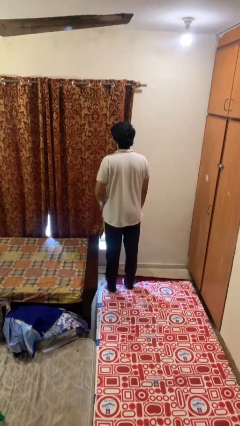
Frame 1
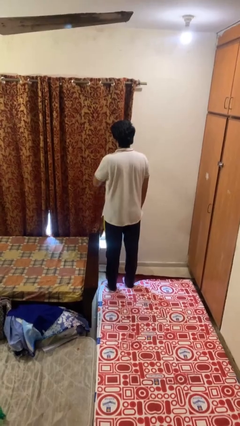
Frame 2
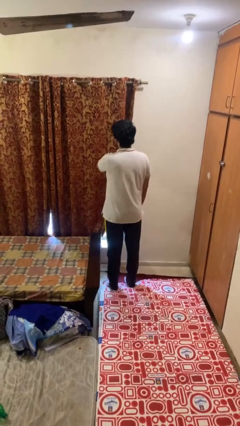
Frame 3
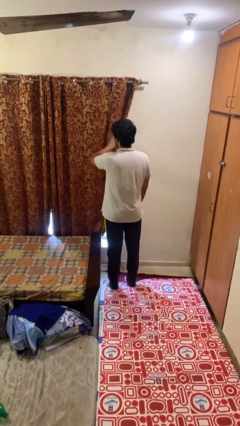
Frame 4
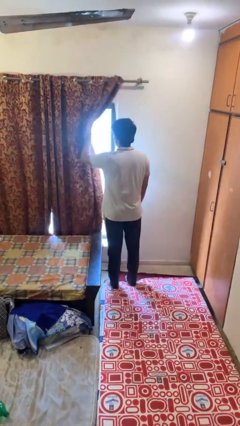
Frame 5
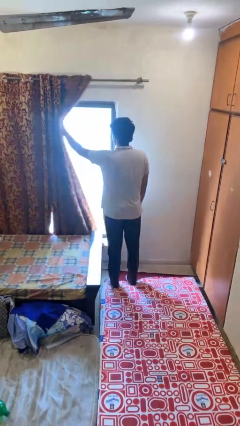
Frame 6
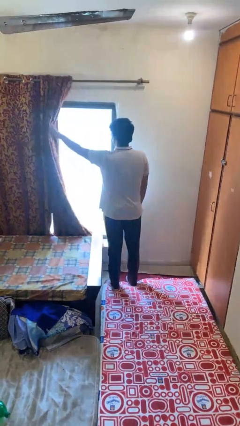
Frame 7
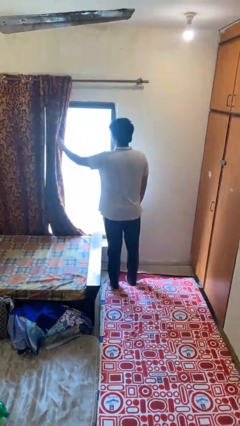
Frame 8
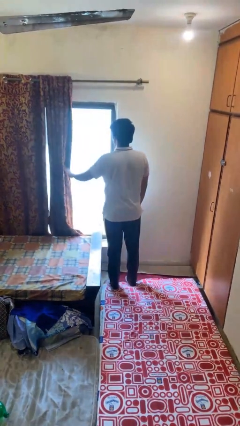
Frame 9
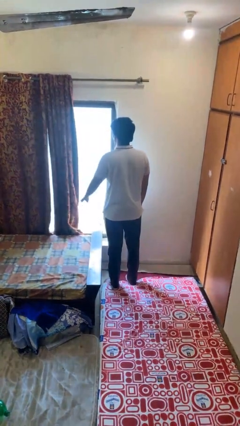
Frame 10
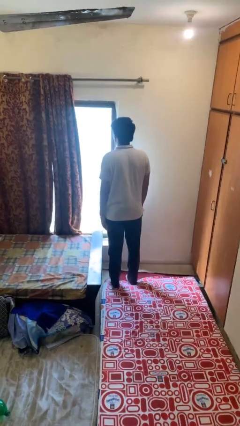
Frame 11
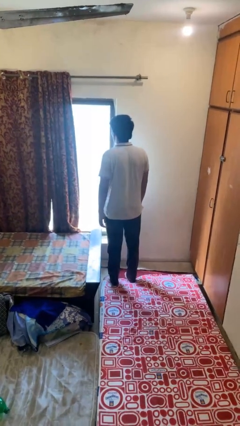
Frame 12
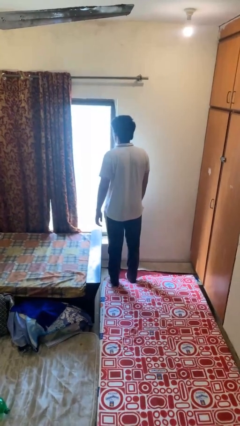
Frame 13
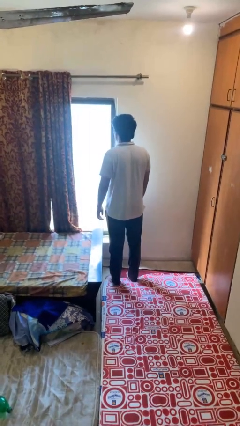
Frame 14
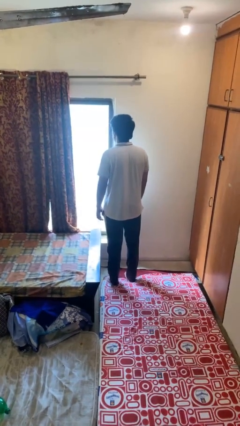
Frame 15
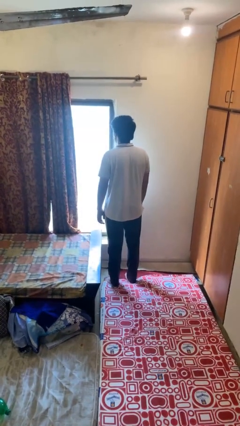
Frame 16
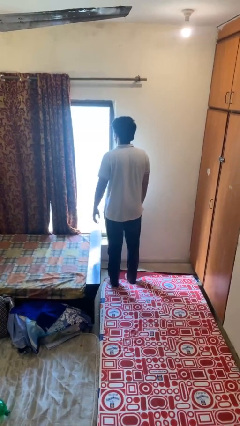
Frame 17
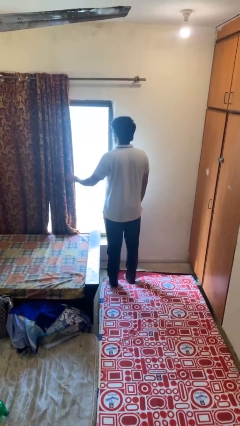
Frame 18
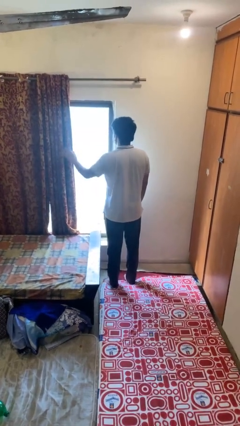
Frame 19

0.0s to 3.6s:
person opens curtains

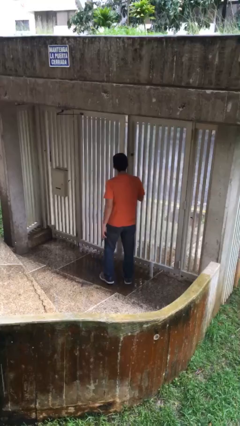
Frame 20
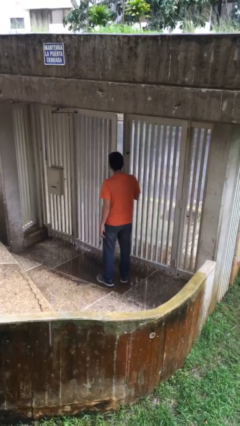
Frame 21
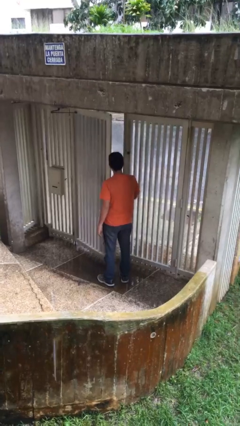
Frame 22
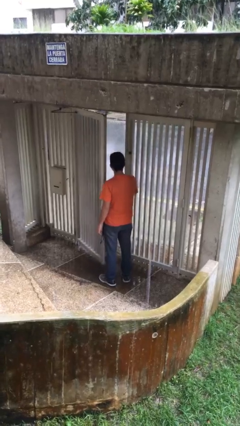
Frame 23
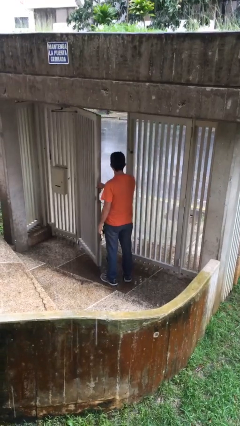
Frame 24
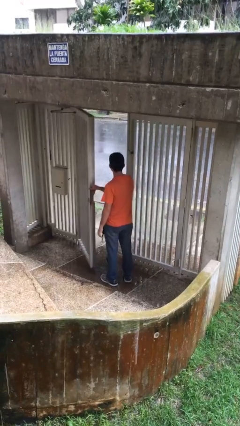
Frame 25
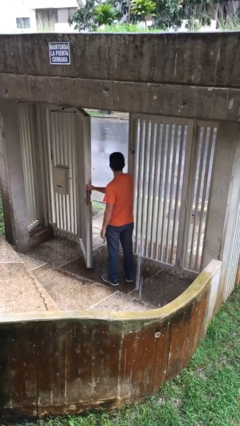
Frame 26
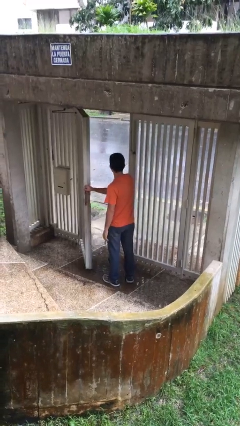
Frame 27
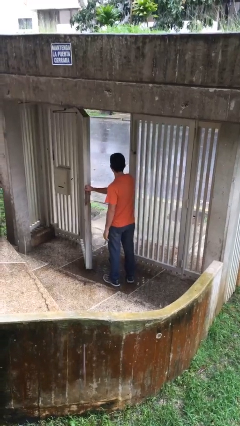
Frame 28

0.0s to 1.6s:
person opens facility door

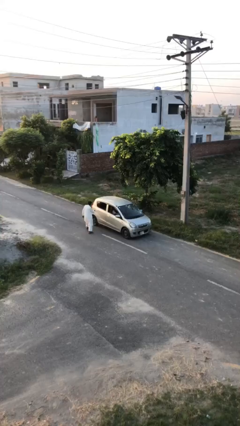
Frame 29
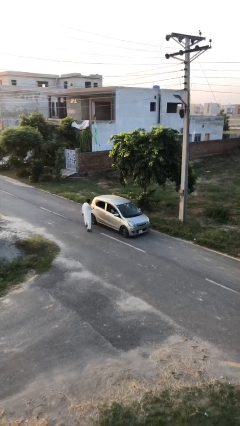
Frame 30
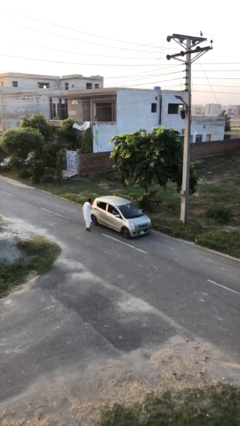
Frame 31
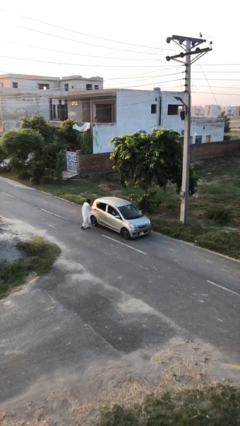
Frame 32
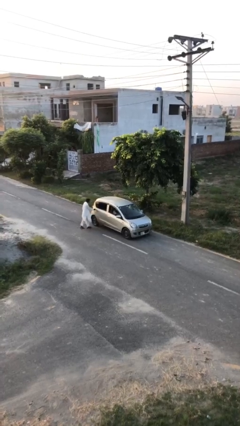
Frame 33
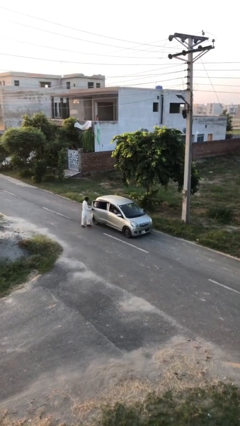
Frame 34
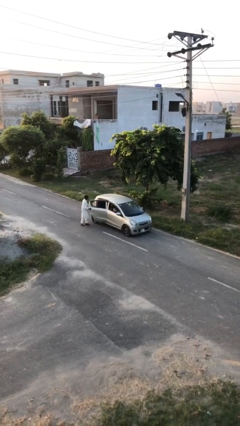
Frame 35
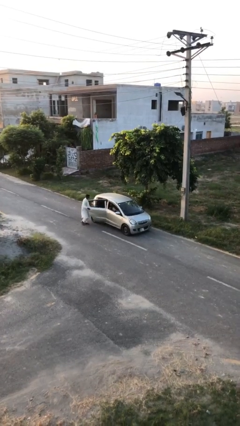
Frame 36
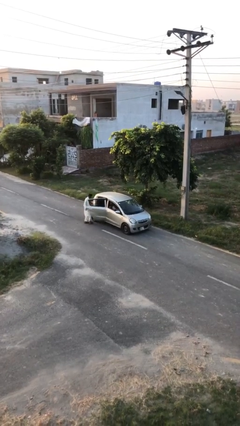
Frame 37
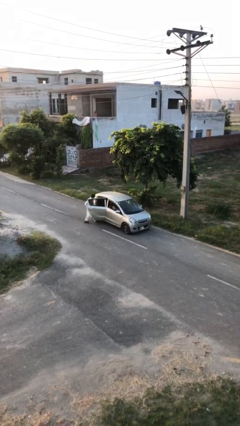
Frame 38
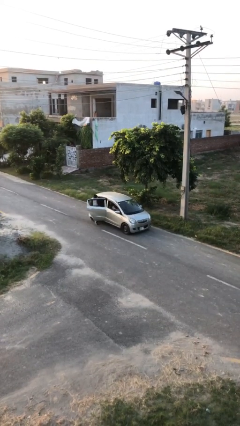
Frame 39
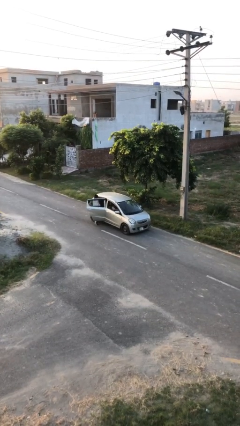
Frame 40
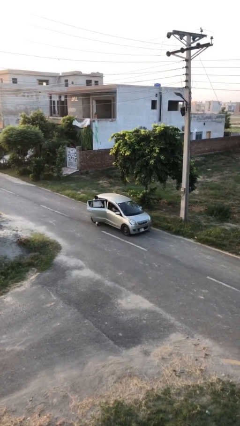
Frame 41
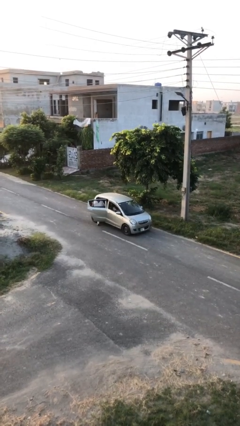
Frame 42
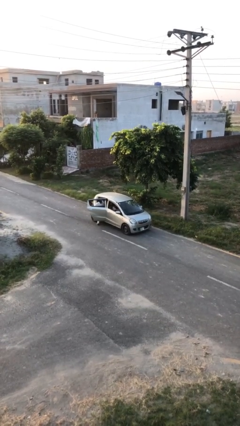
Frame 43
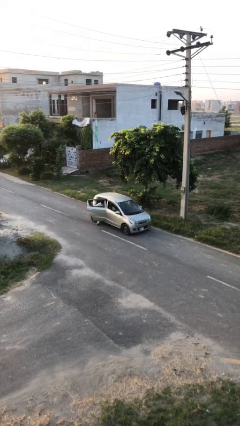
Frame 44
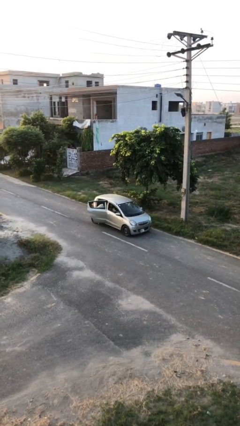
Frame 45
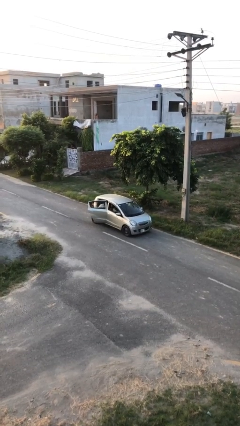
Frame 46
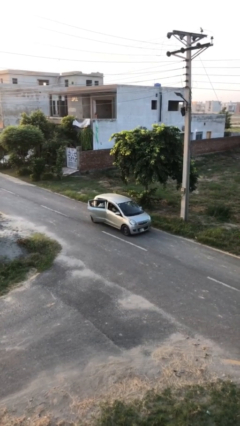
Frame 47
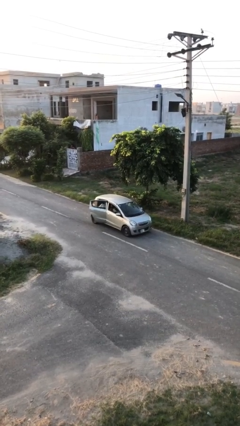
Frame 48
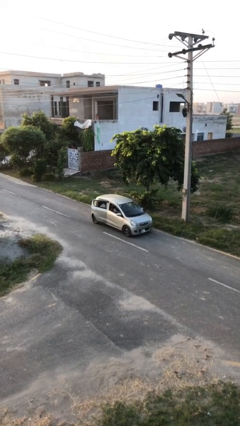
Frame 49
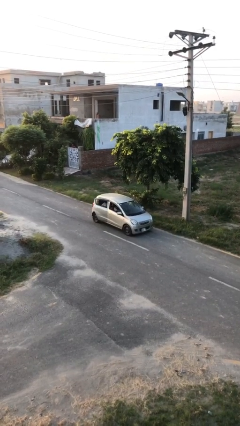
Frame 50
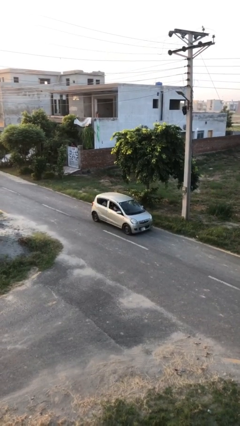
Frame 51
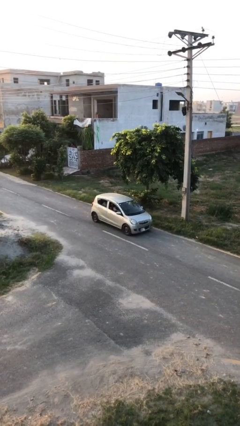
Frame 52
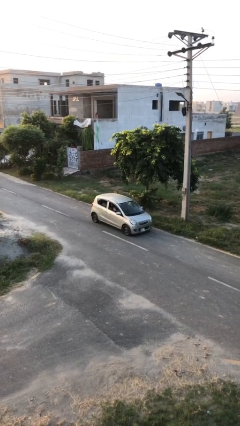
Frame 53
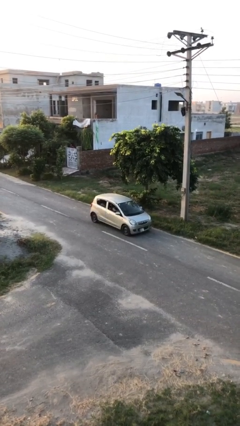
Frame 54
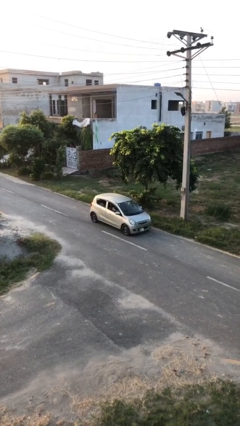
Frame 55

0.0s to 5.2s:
car picks up person

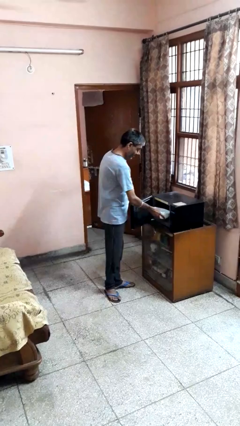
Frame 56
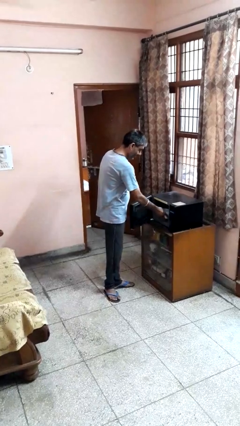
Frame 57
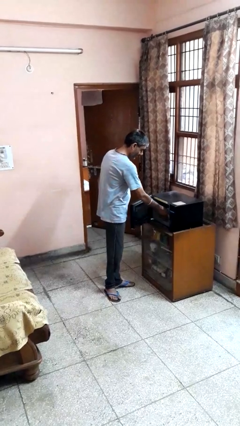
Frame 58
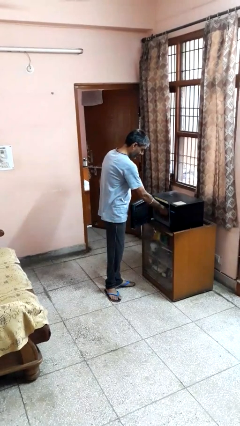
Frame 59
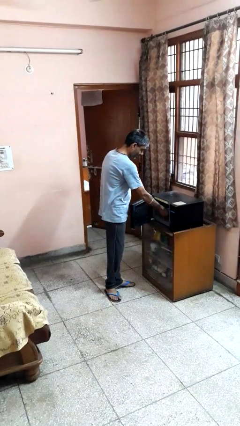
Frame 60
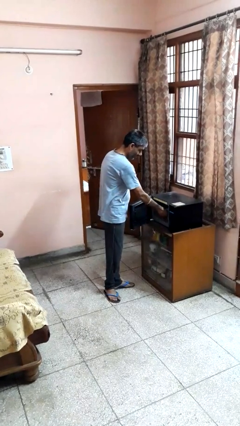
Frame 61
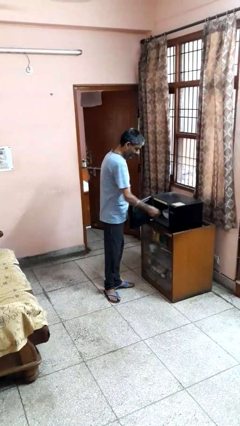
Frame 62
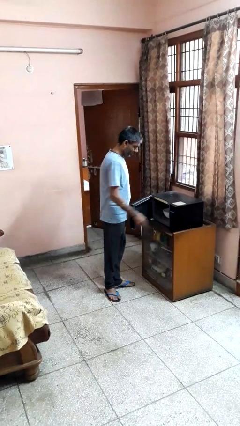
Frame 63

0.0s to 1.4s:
person puts object into microwave

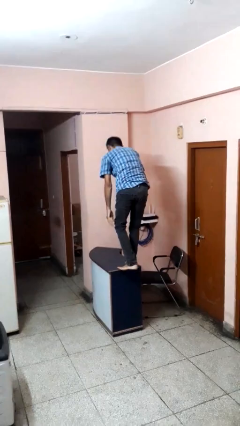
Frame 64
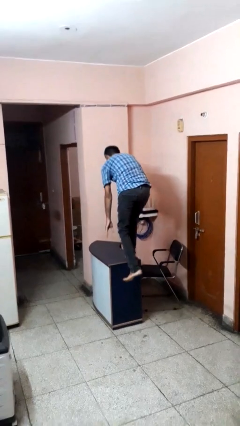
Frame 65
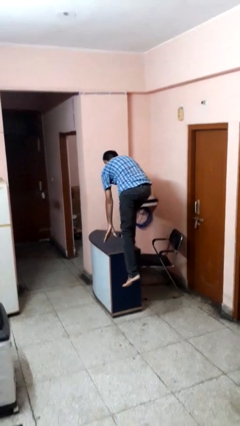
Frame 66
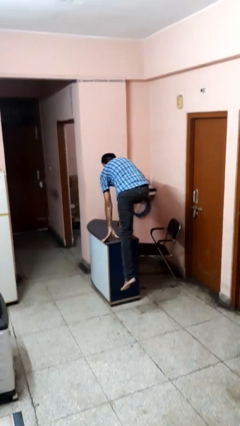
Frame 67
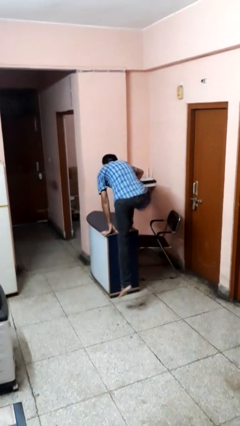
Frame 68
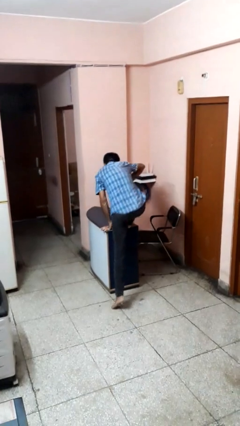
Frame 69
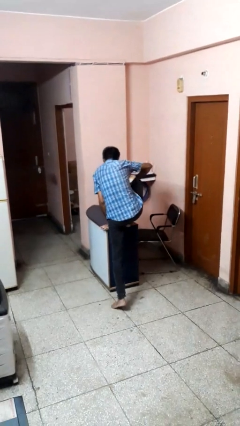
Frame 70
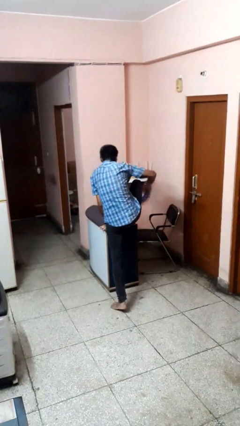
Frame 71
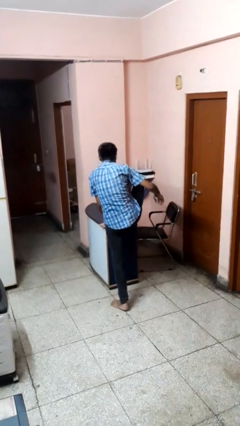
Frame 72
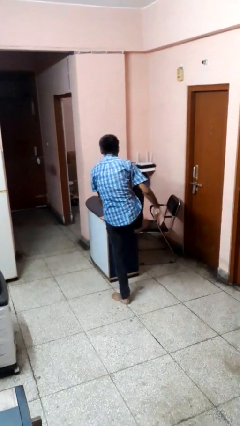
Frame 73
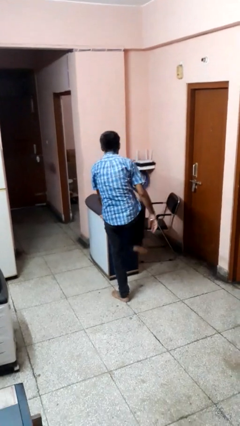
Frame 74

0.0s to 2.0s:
person climbs off table

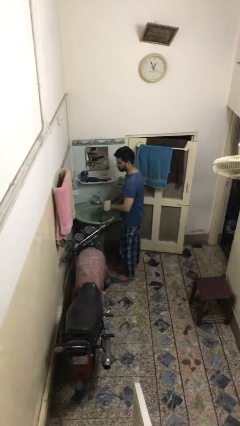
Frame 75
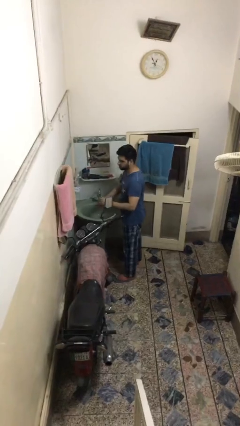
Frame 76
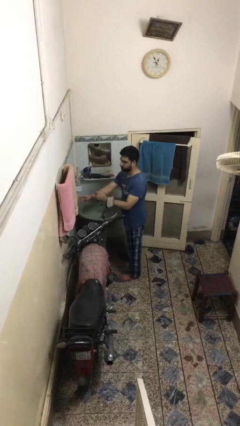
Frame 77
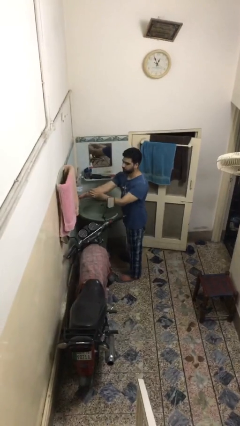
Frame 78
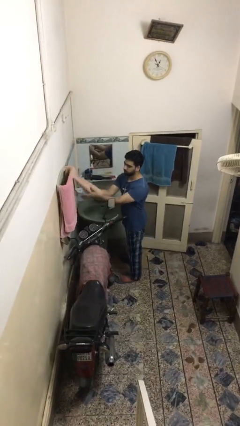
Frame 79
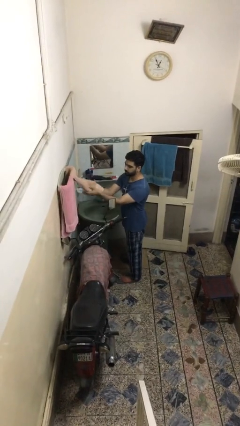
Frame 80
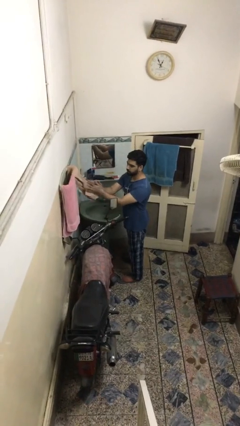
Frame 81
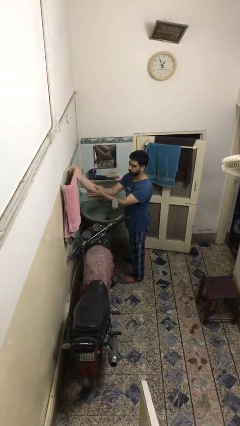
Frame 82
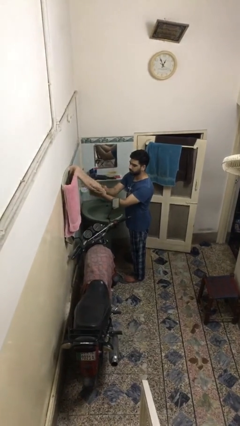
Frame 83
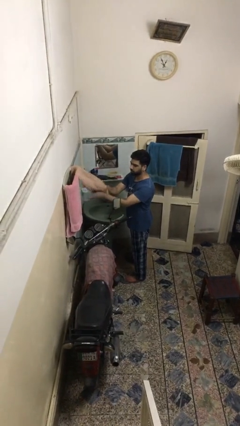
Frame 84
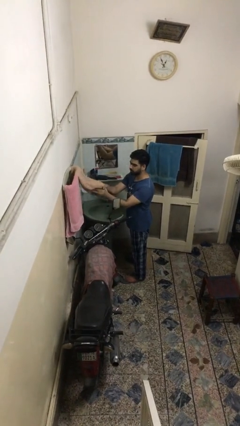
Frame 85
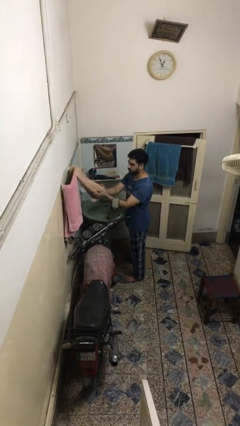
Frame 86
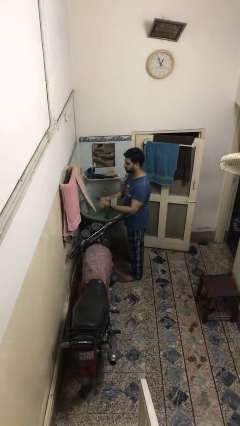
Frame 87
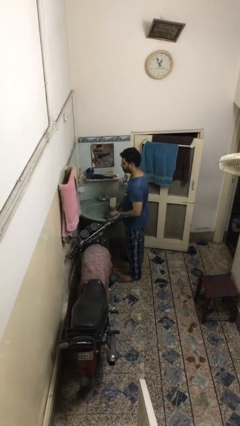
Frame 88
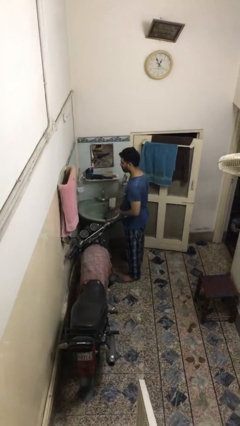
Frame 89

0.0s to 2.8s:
person dries hands with towel

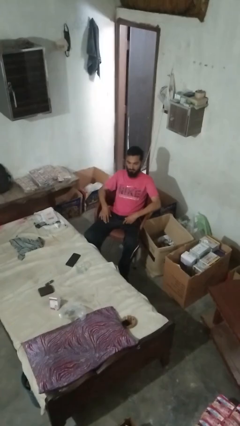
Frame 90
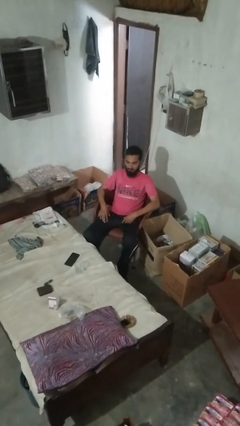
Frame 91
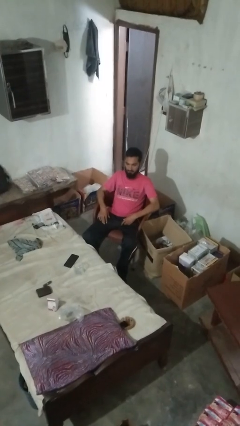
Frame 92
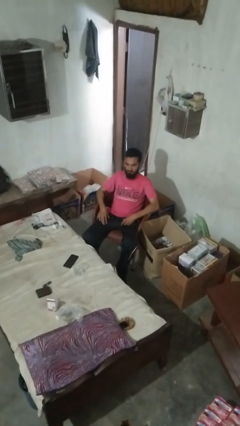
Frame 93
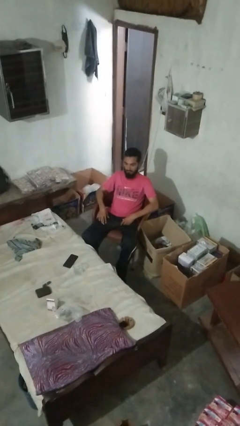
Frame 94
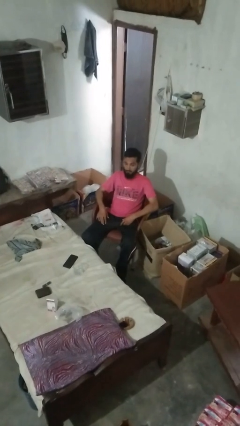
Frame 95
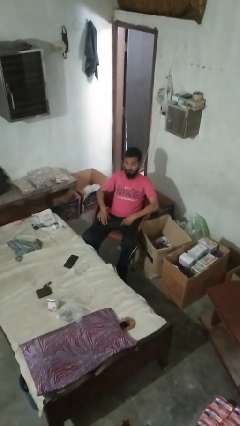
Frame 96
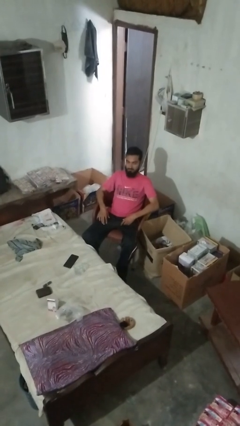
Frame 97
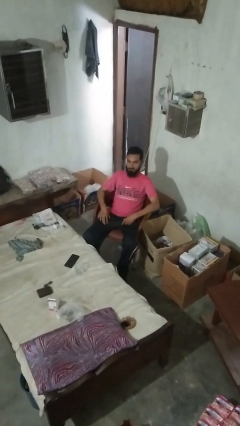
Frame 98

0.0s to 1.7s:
person shakes head
